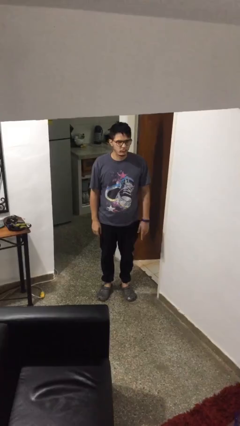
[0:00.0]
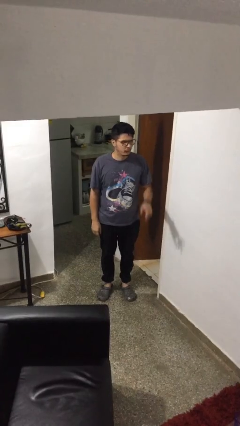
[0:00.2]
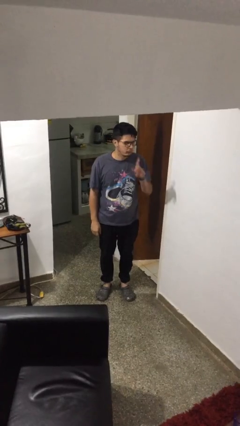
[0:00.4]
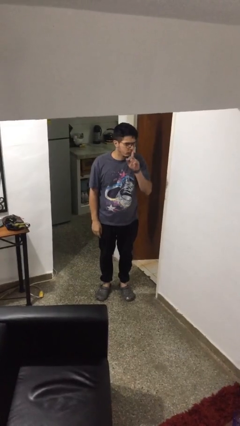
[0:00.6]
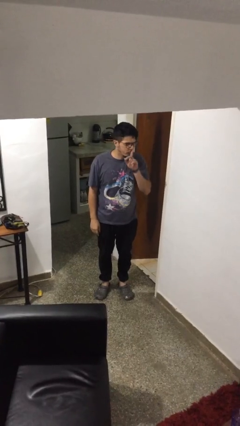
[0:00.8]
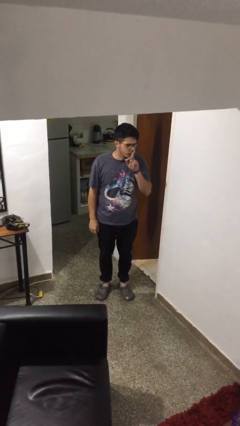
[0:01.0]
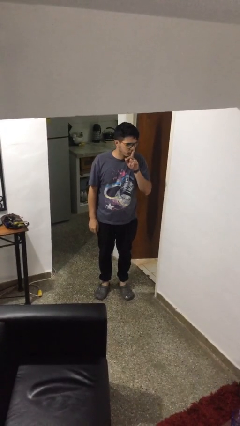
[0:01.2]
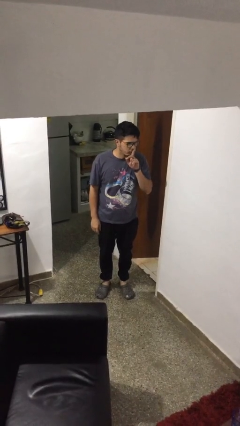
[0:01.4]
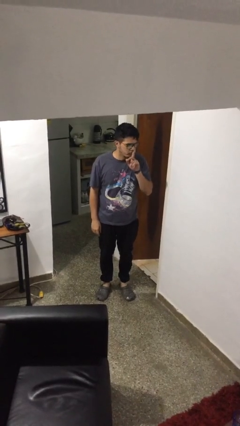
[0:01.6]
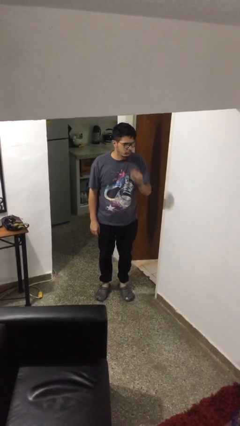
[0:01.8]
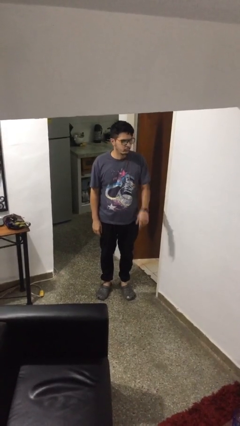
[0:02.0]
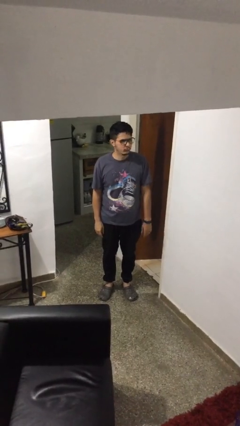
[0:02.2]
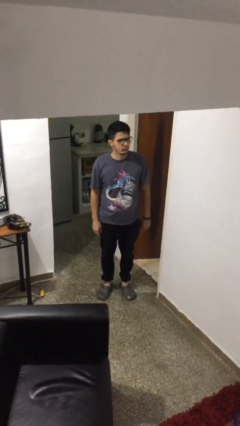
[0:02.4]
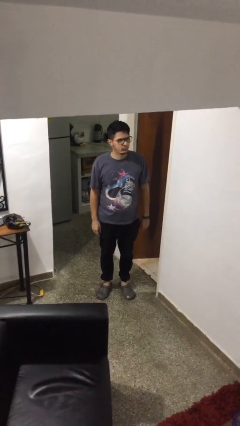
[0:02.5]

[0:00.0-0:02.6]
person gestures be quiet

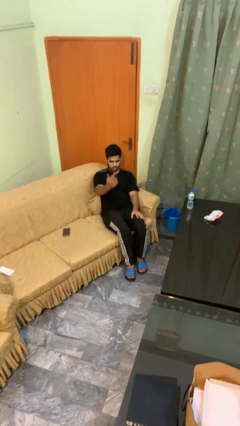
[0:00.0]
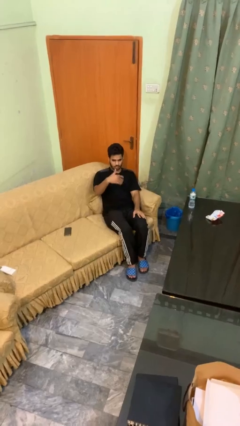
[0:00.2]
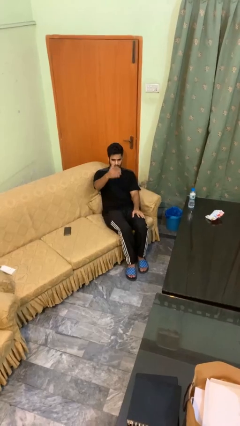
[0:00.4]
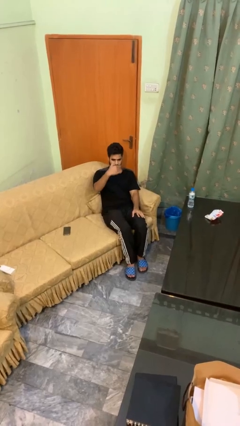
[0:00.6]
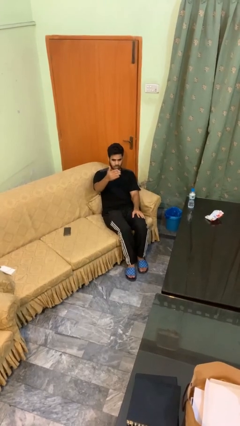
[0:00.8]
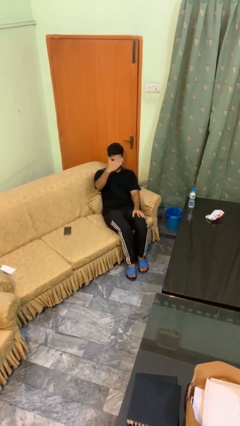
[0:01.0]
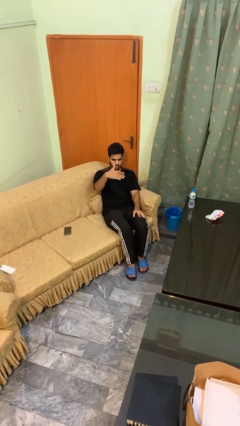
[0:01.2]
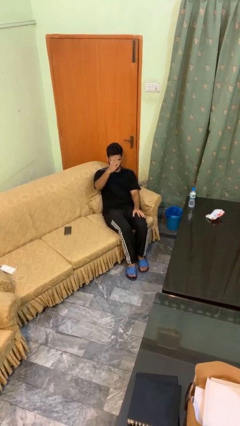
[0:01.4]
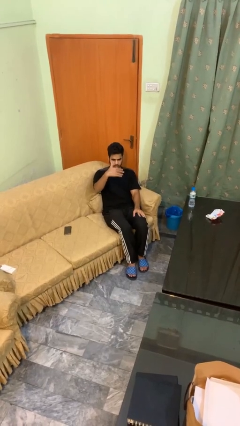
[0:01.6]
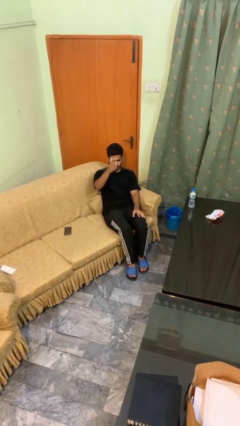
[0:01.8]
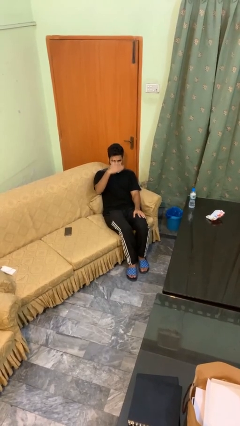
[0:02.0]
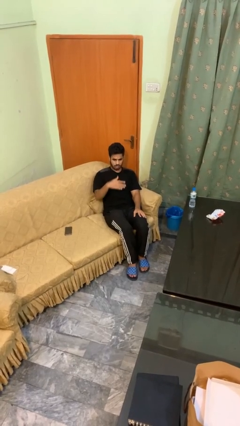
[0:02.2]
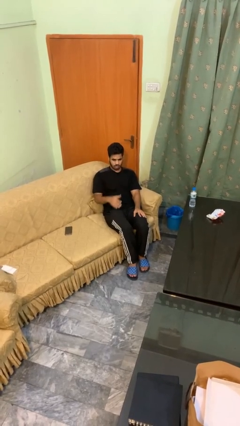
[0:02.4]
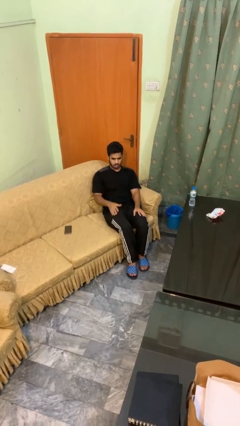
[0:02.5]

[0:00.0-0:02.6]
person gestures come here

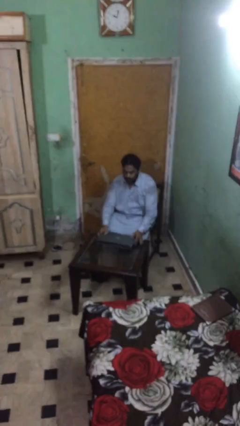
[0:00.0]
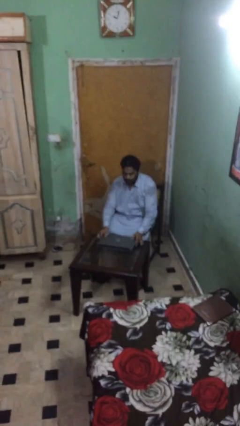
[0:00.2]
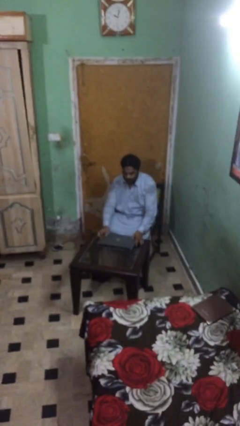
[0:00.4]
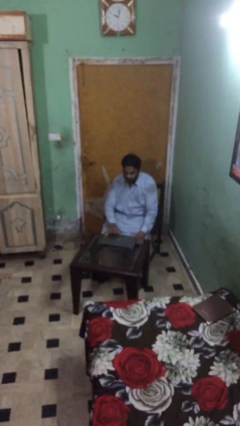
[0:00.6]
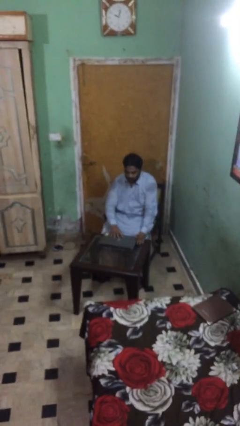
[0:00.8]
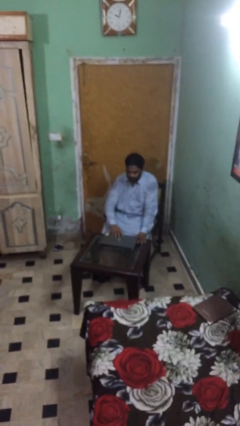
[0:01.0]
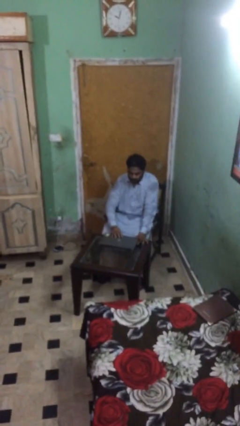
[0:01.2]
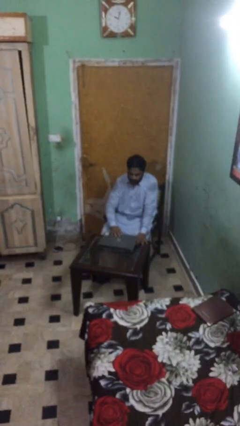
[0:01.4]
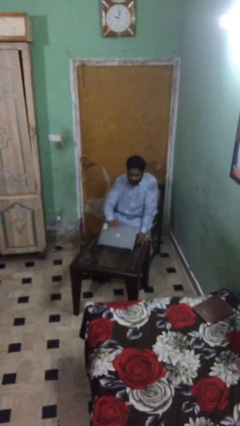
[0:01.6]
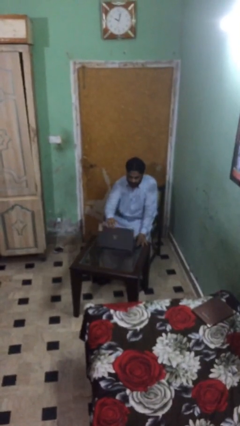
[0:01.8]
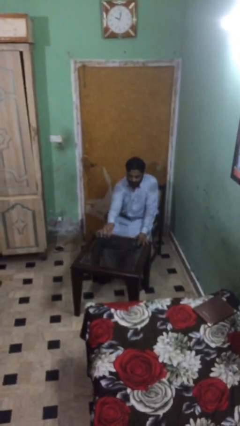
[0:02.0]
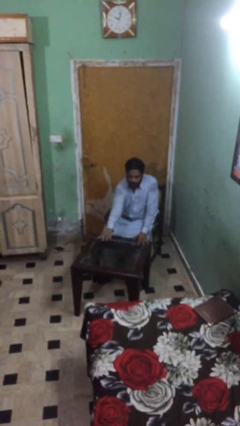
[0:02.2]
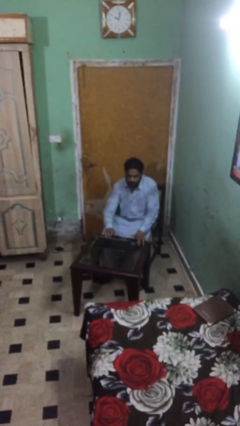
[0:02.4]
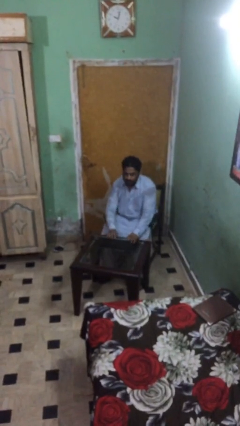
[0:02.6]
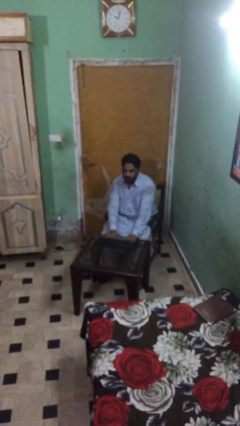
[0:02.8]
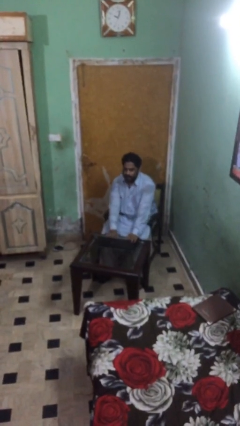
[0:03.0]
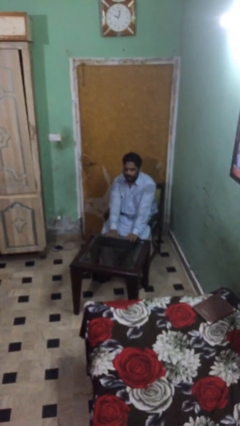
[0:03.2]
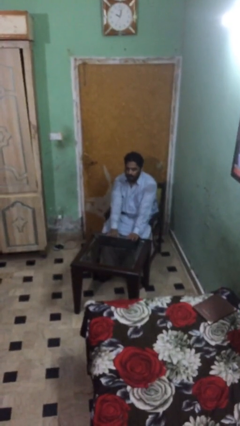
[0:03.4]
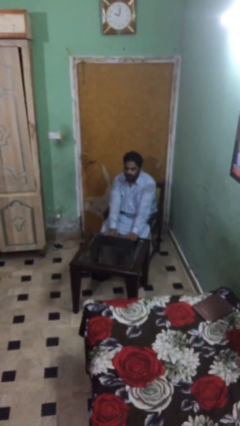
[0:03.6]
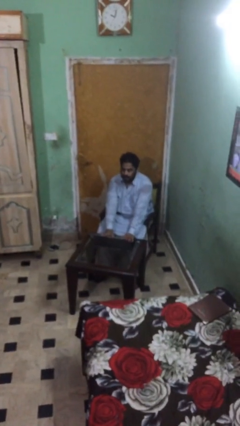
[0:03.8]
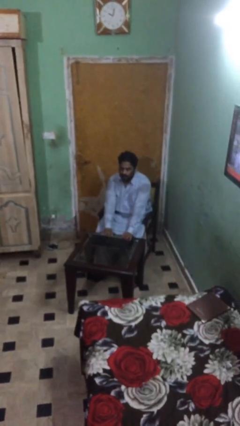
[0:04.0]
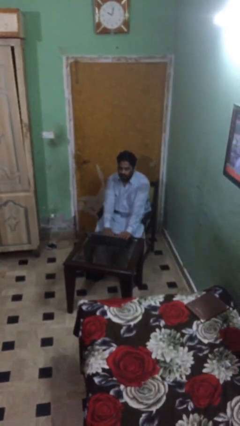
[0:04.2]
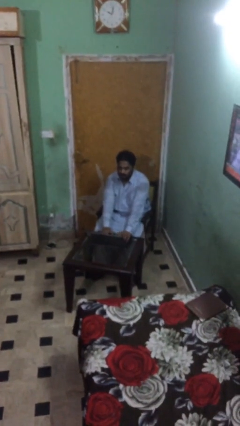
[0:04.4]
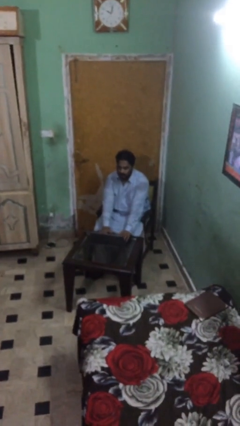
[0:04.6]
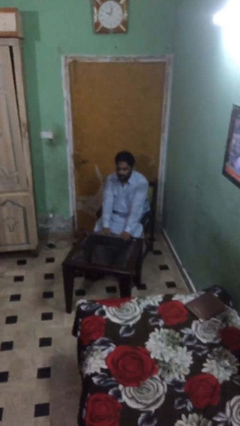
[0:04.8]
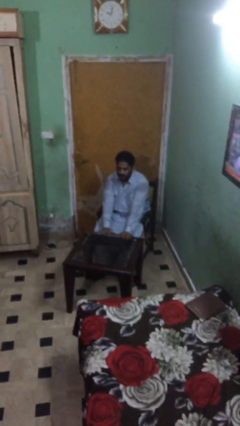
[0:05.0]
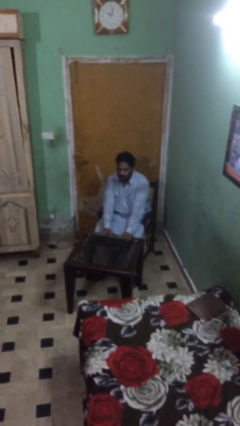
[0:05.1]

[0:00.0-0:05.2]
person interacts with laptop

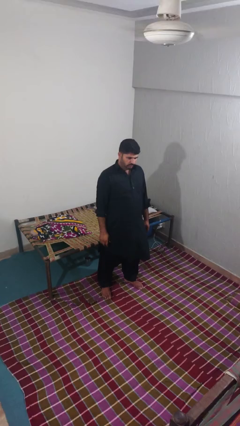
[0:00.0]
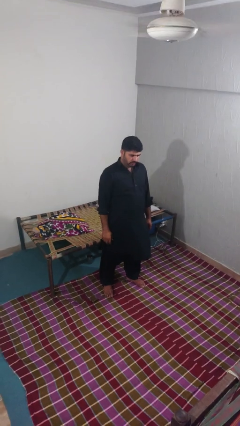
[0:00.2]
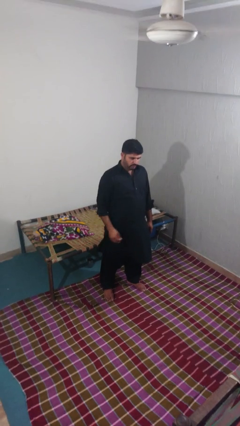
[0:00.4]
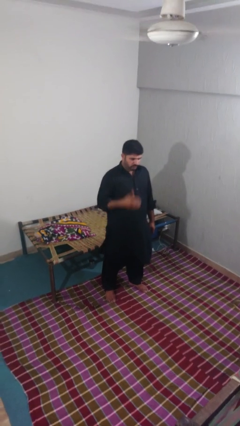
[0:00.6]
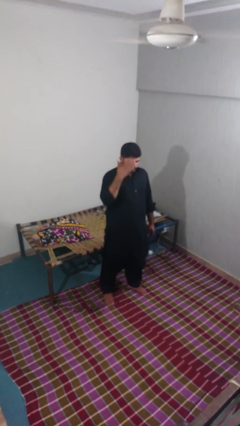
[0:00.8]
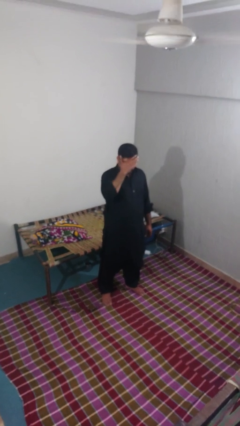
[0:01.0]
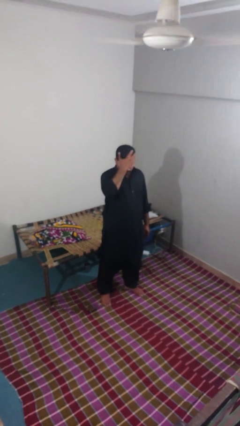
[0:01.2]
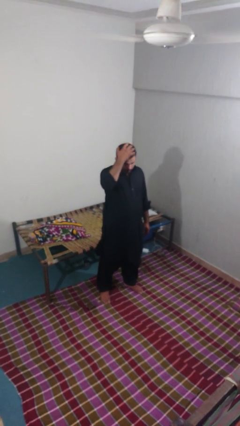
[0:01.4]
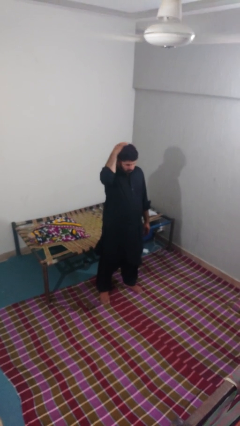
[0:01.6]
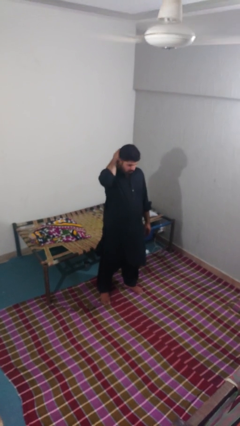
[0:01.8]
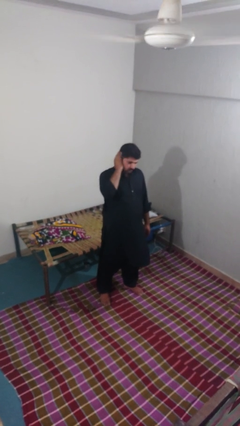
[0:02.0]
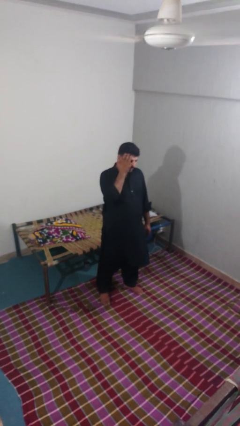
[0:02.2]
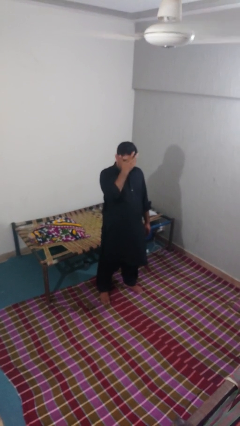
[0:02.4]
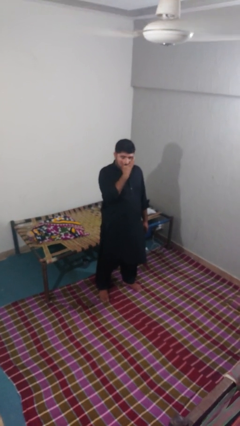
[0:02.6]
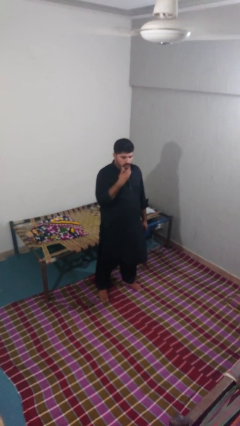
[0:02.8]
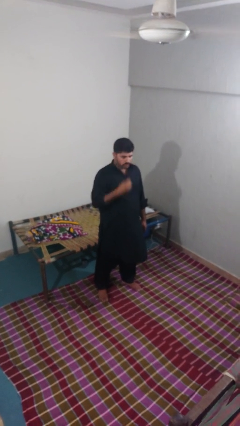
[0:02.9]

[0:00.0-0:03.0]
person scratches face

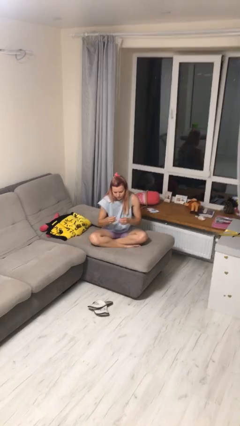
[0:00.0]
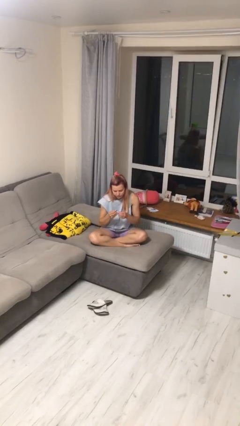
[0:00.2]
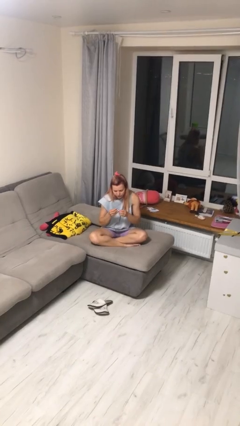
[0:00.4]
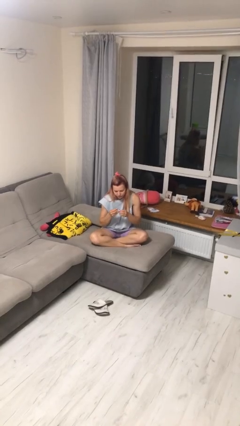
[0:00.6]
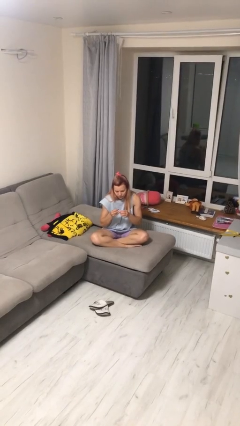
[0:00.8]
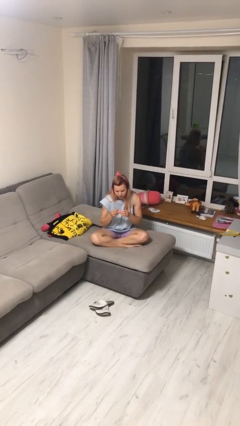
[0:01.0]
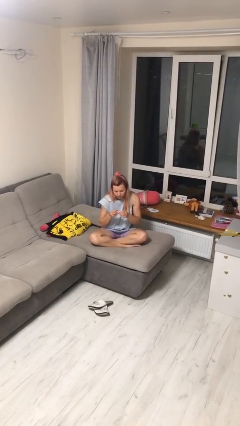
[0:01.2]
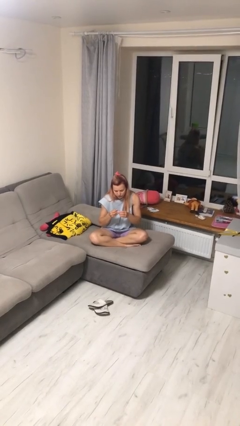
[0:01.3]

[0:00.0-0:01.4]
person clips fingernails

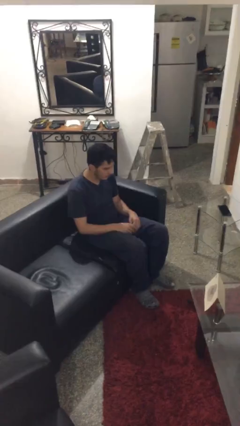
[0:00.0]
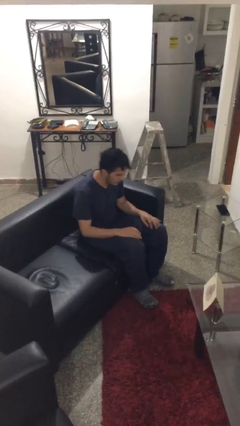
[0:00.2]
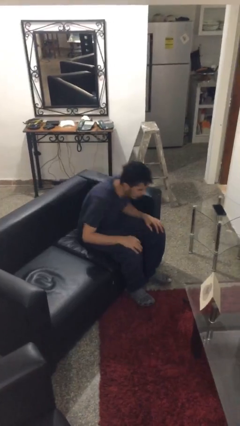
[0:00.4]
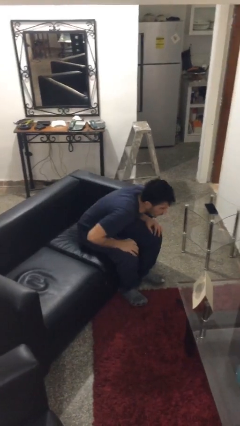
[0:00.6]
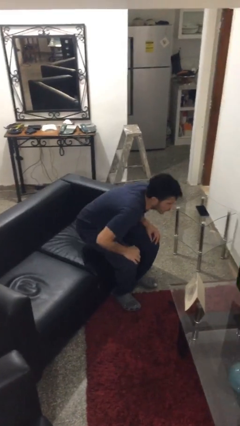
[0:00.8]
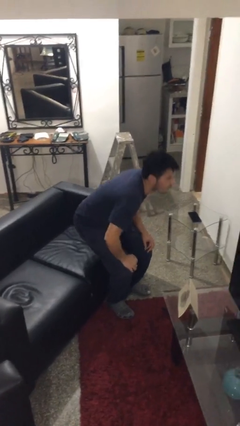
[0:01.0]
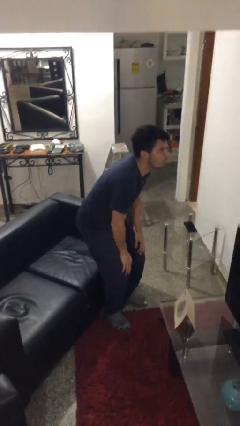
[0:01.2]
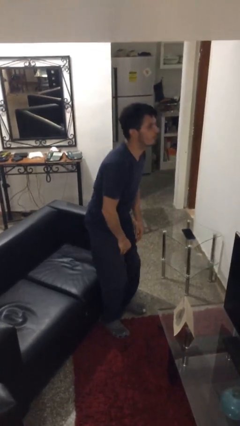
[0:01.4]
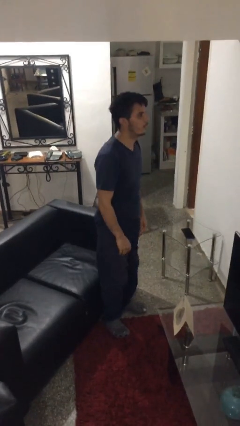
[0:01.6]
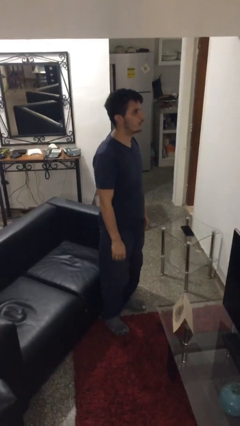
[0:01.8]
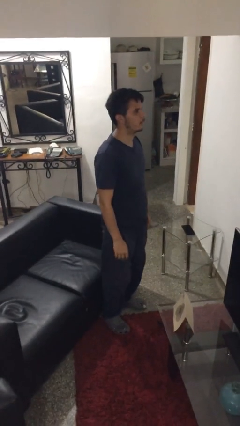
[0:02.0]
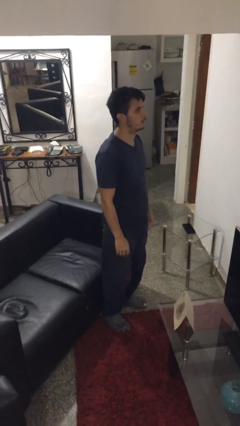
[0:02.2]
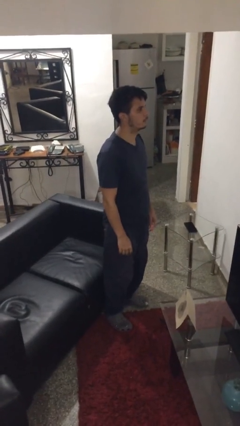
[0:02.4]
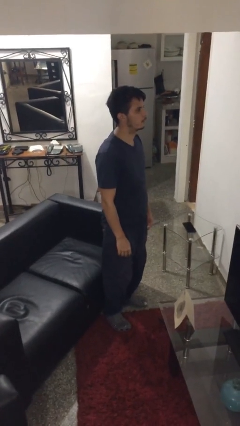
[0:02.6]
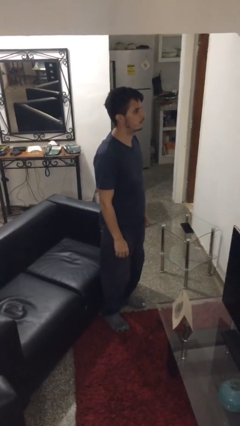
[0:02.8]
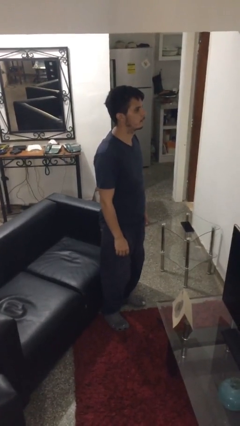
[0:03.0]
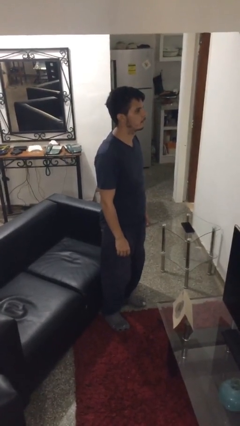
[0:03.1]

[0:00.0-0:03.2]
person stands up
